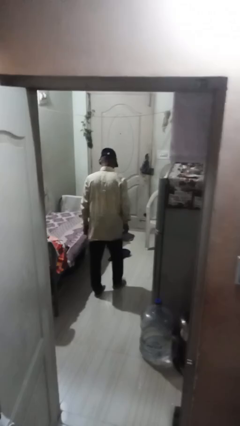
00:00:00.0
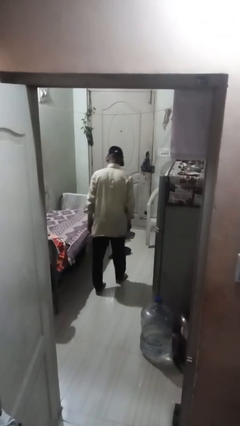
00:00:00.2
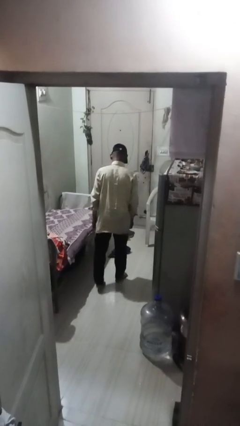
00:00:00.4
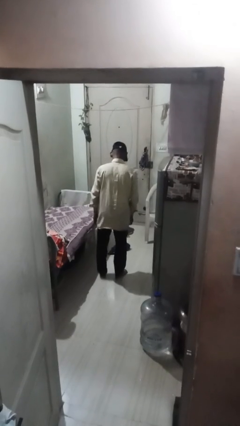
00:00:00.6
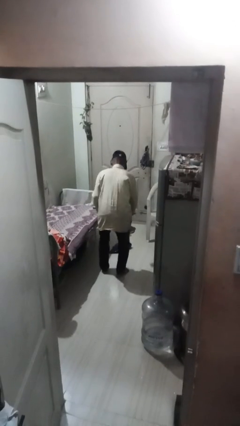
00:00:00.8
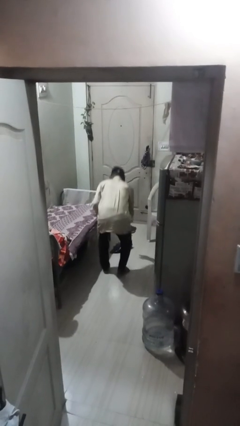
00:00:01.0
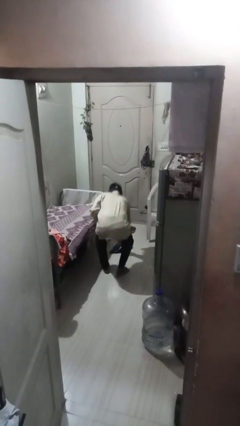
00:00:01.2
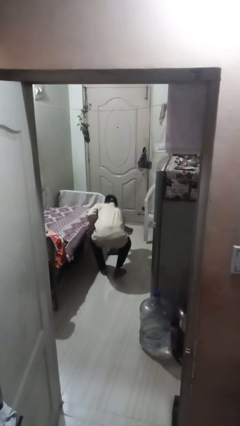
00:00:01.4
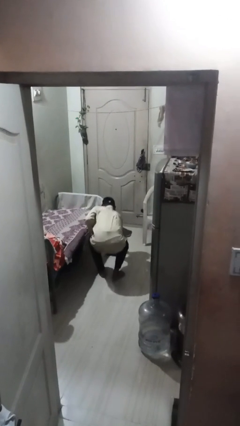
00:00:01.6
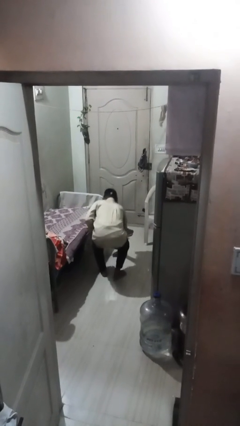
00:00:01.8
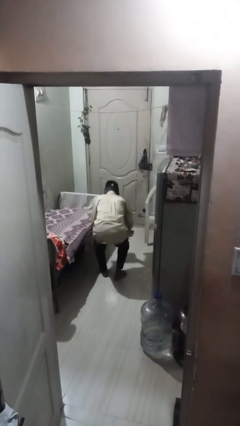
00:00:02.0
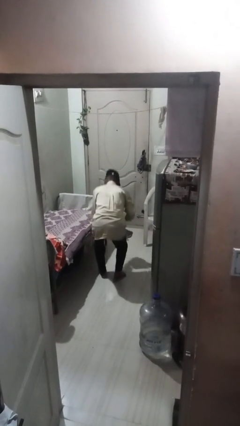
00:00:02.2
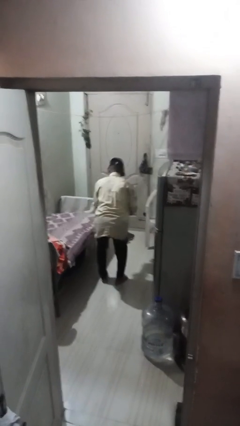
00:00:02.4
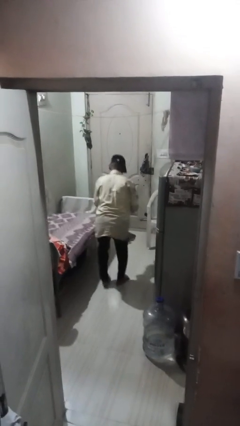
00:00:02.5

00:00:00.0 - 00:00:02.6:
person picks up object from floor

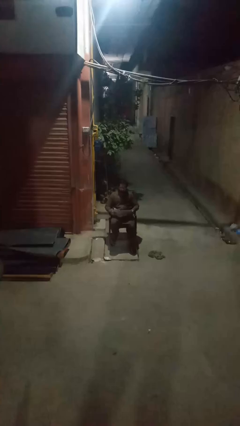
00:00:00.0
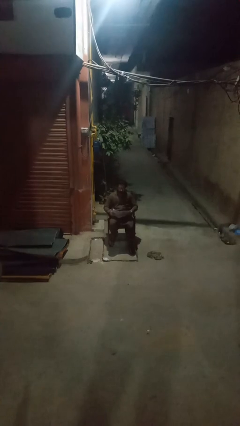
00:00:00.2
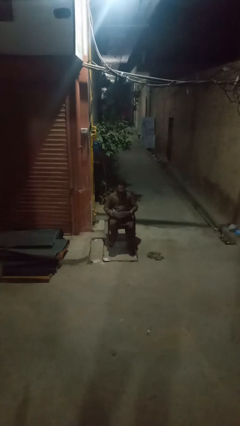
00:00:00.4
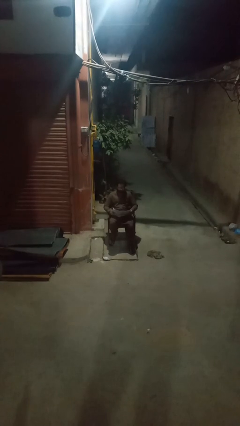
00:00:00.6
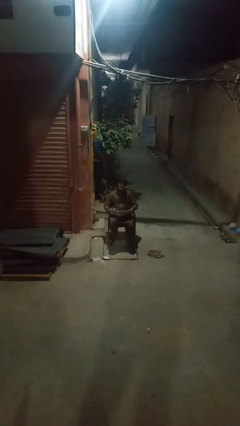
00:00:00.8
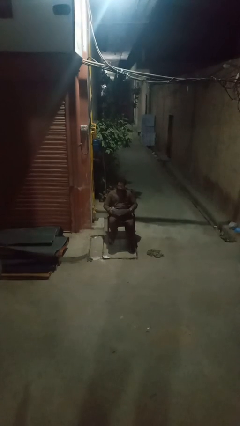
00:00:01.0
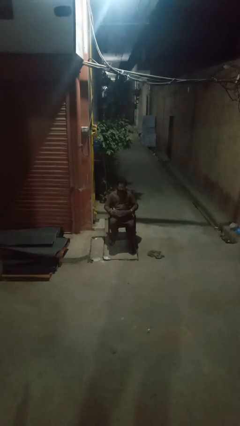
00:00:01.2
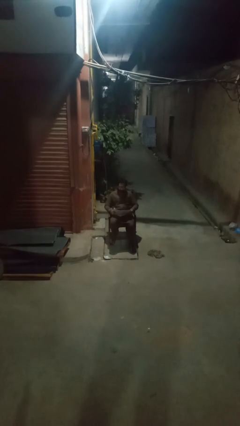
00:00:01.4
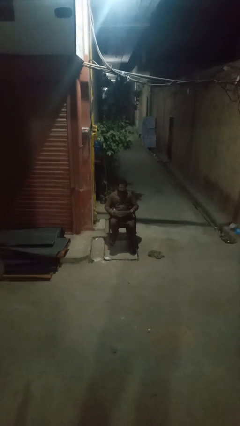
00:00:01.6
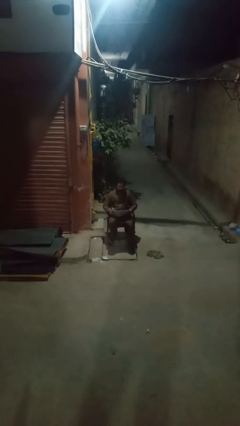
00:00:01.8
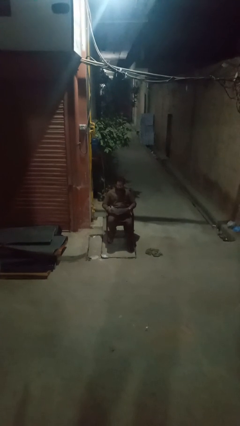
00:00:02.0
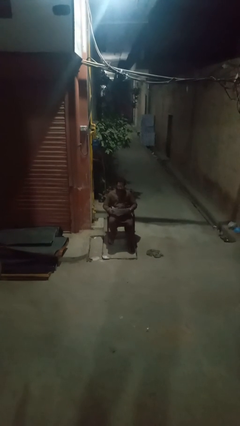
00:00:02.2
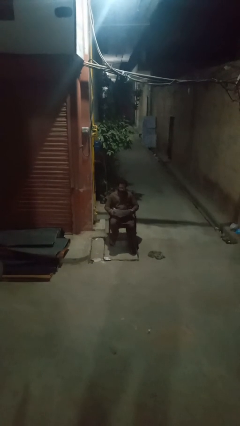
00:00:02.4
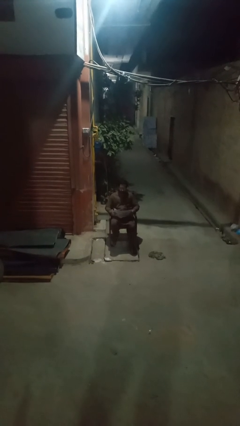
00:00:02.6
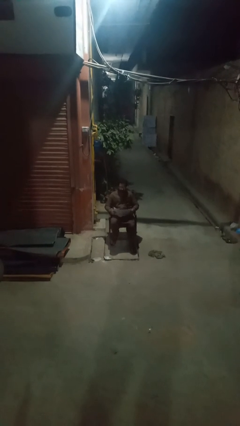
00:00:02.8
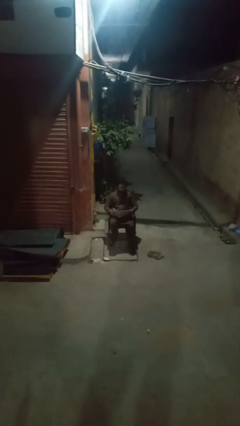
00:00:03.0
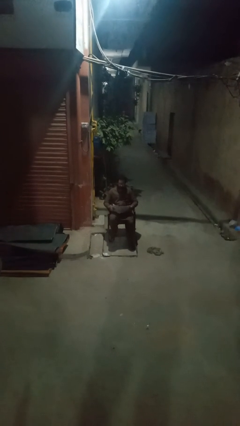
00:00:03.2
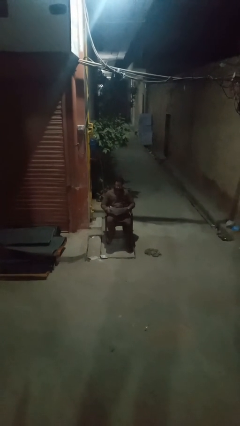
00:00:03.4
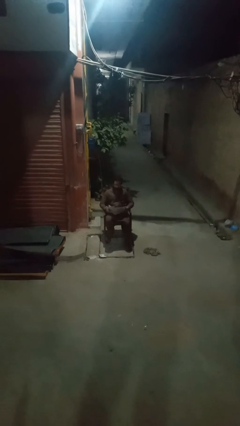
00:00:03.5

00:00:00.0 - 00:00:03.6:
person reads magazine

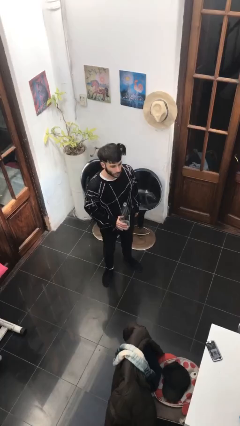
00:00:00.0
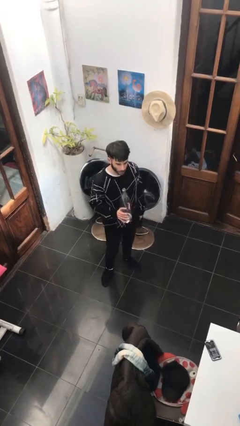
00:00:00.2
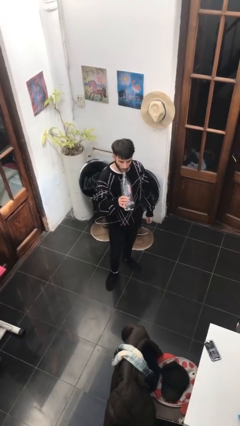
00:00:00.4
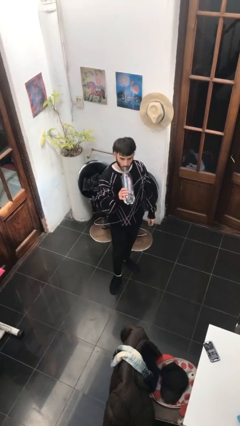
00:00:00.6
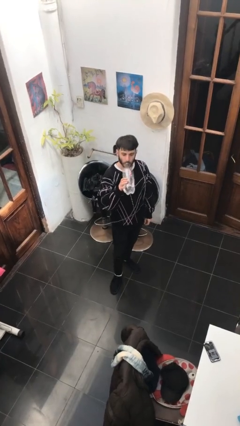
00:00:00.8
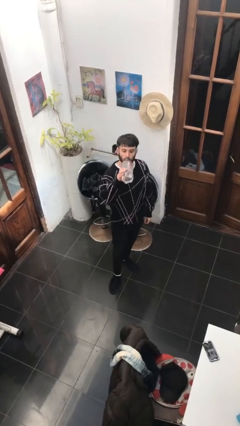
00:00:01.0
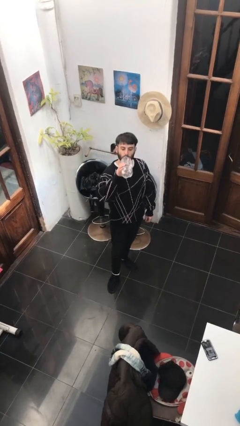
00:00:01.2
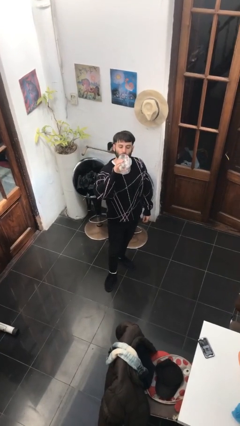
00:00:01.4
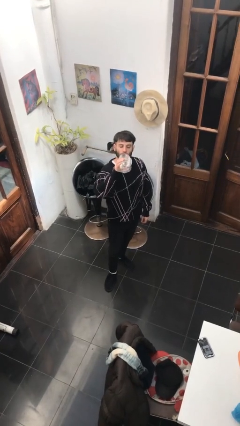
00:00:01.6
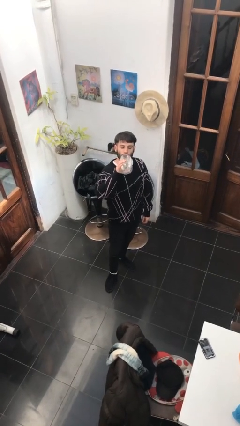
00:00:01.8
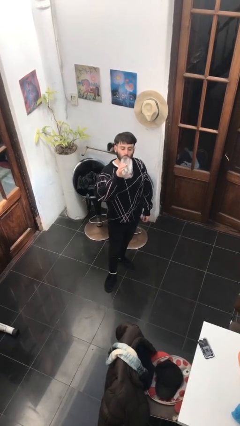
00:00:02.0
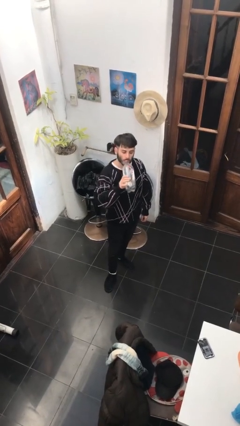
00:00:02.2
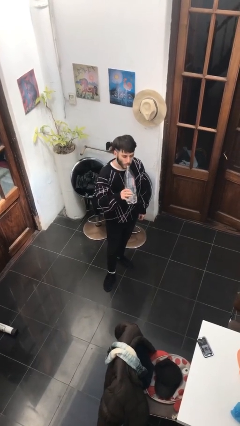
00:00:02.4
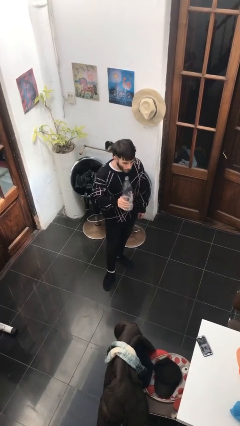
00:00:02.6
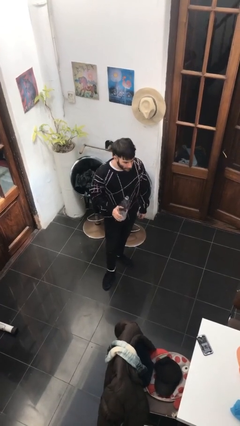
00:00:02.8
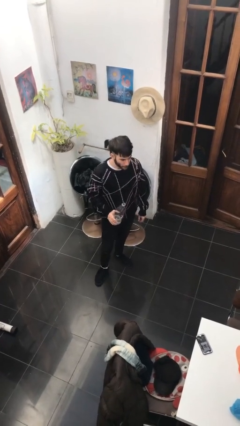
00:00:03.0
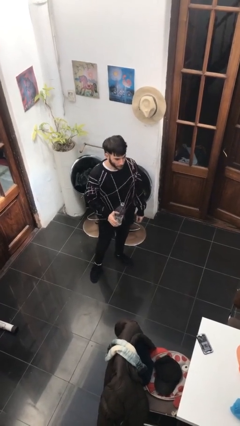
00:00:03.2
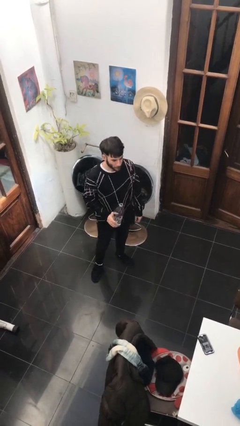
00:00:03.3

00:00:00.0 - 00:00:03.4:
person drinks from bottle

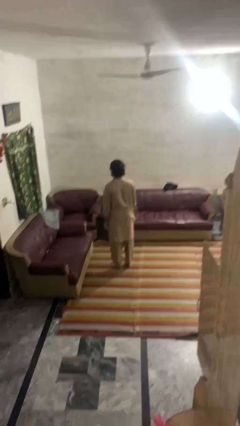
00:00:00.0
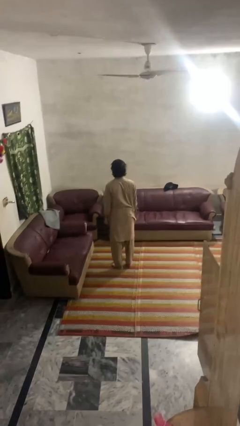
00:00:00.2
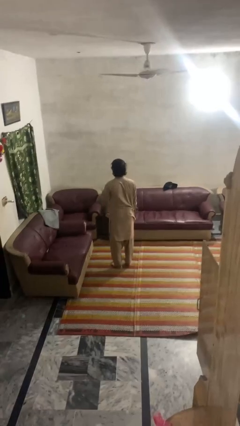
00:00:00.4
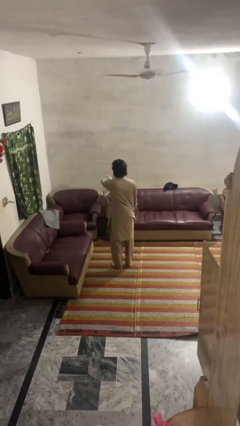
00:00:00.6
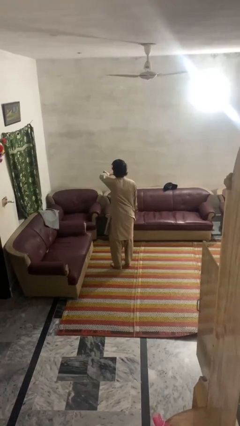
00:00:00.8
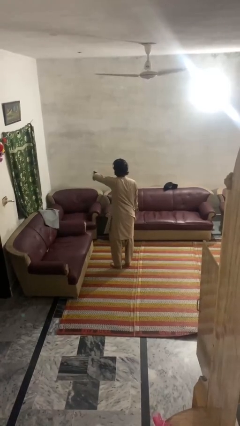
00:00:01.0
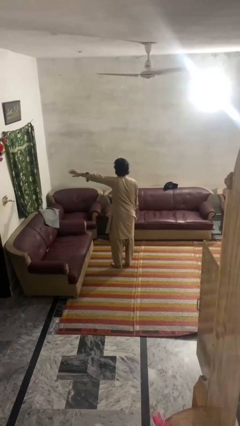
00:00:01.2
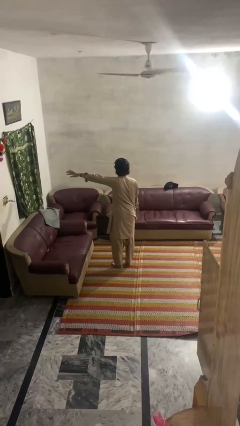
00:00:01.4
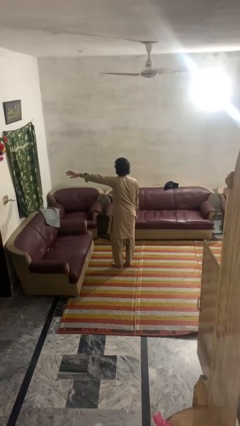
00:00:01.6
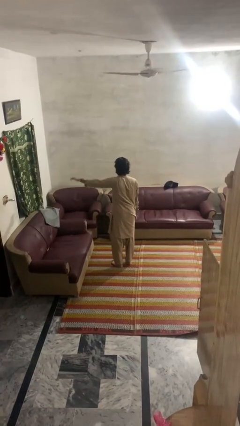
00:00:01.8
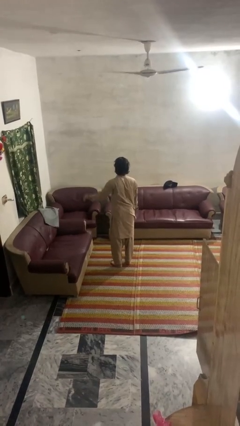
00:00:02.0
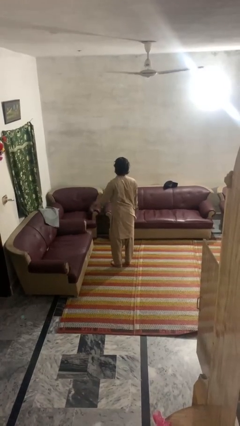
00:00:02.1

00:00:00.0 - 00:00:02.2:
person gestures swipe left

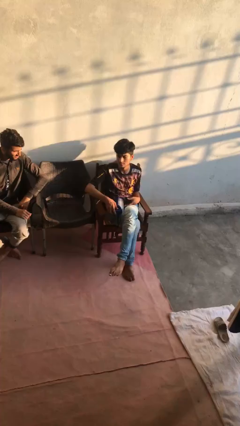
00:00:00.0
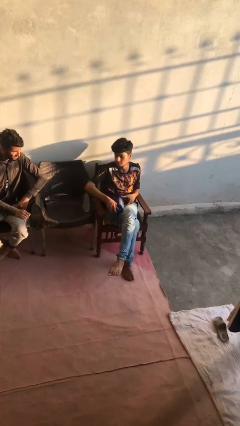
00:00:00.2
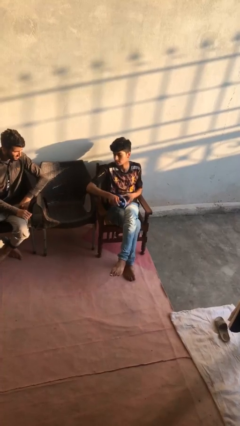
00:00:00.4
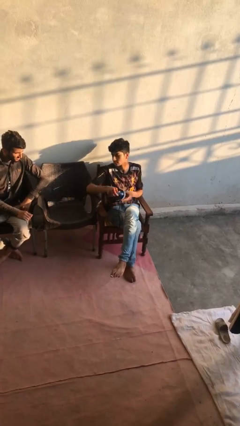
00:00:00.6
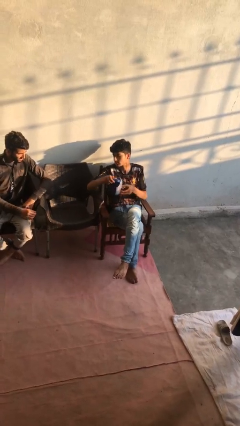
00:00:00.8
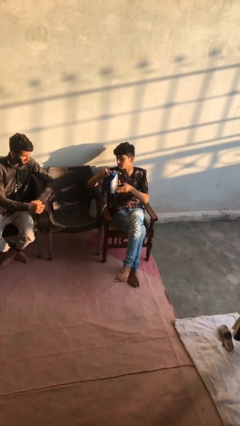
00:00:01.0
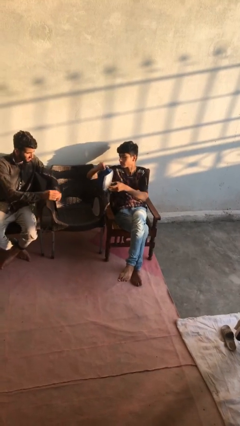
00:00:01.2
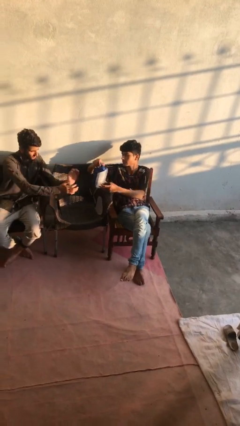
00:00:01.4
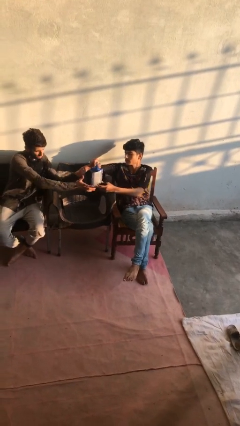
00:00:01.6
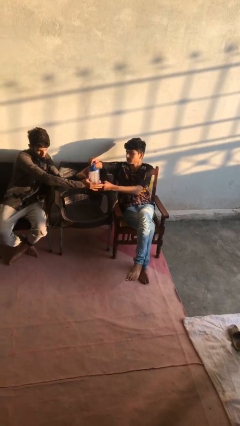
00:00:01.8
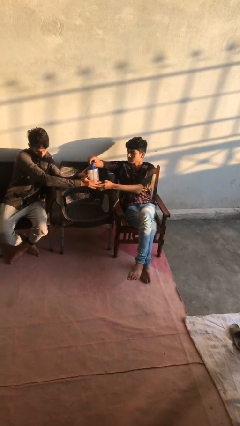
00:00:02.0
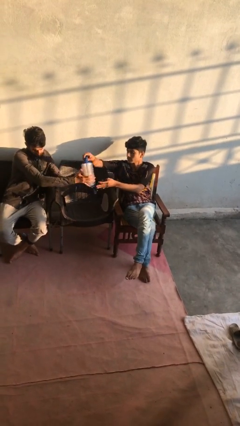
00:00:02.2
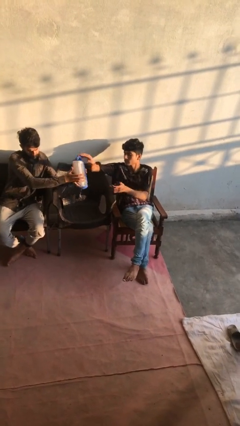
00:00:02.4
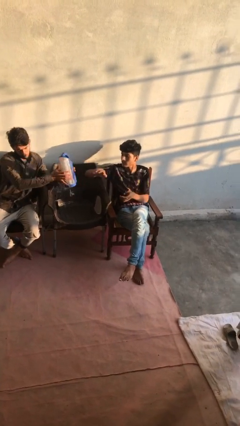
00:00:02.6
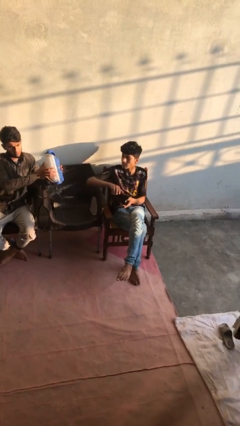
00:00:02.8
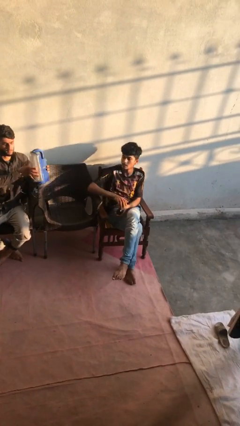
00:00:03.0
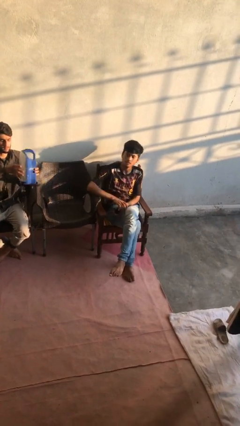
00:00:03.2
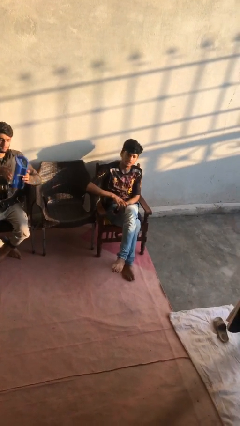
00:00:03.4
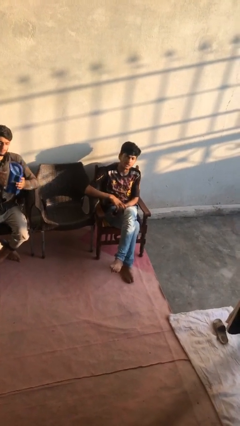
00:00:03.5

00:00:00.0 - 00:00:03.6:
person transfers object to person

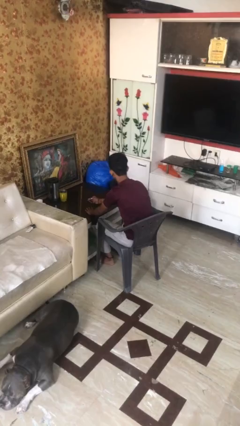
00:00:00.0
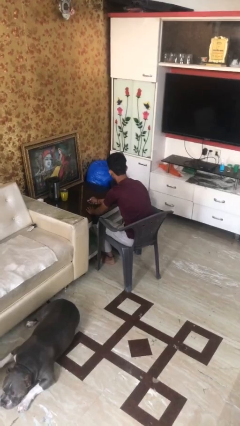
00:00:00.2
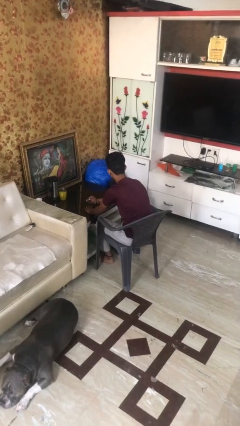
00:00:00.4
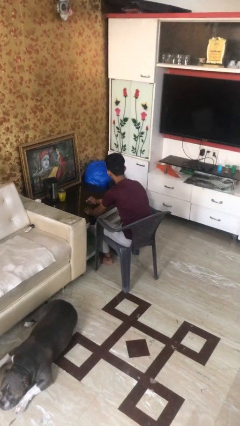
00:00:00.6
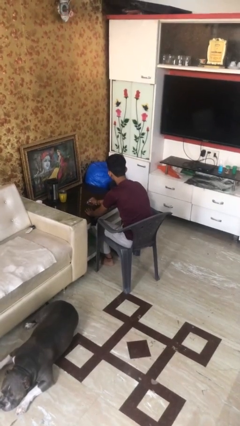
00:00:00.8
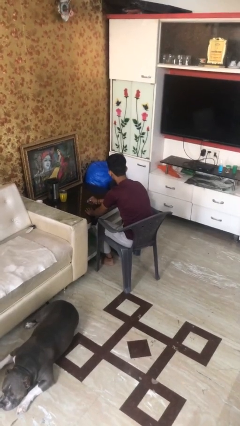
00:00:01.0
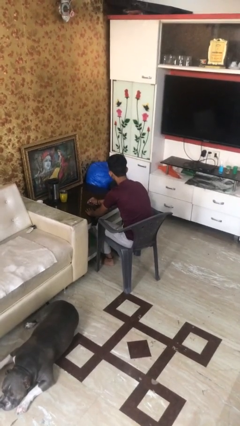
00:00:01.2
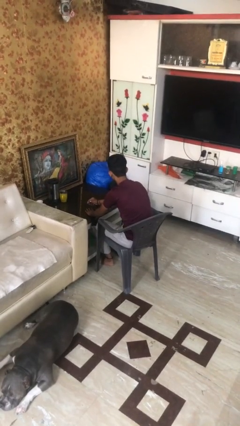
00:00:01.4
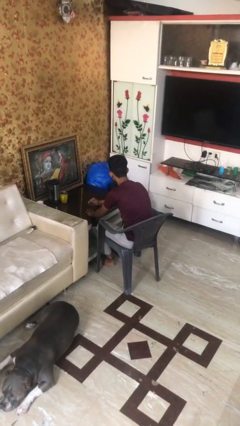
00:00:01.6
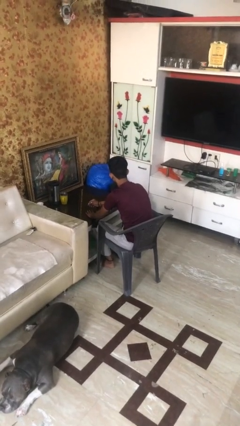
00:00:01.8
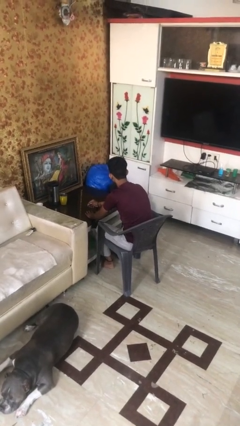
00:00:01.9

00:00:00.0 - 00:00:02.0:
person paints fingernails
